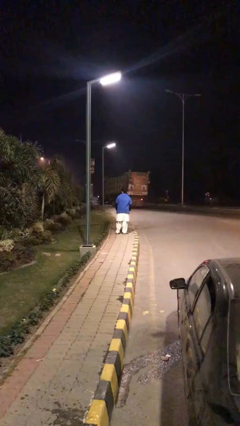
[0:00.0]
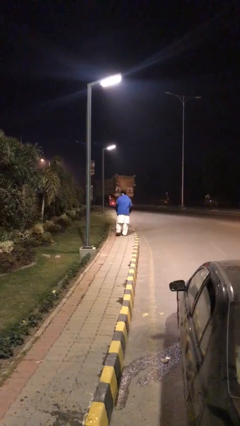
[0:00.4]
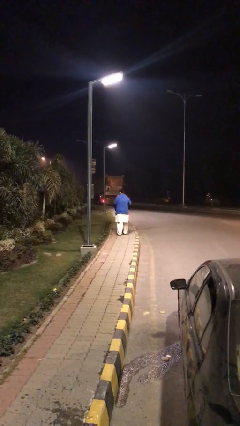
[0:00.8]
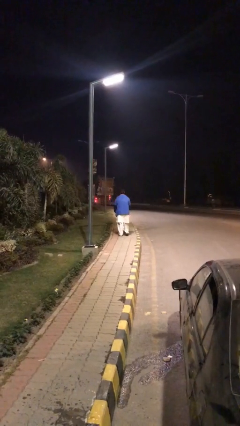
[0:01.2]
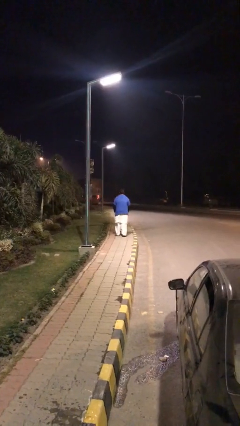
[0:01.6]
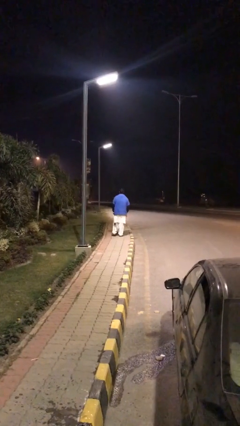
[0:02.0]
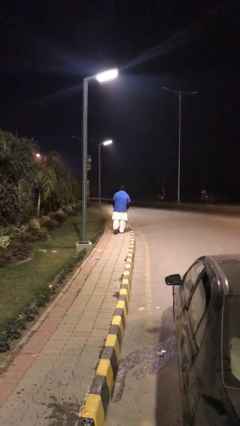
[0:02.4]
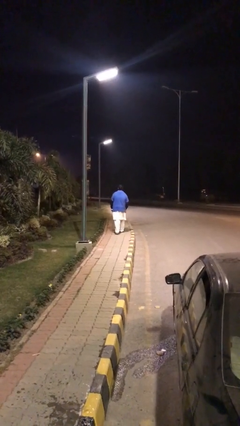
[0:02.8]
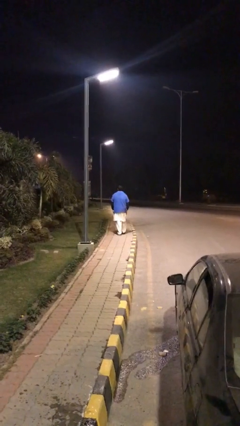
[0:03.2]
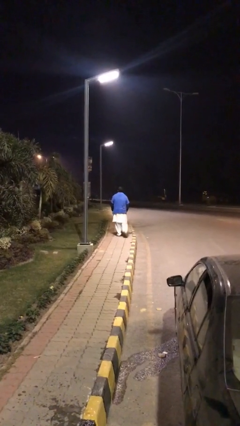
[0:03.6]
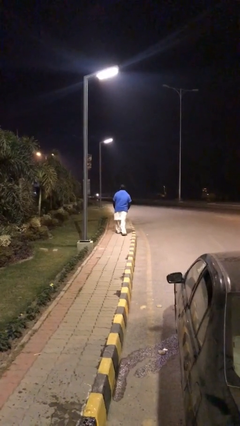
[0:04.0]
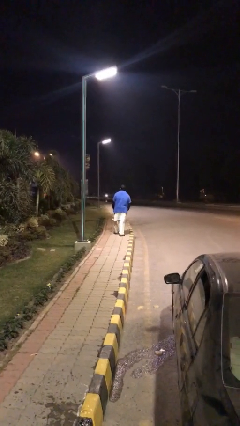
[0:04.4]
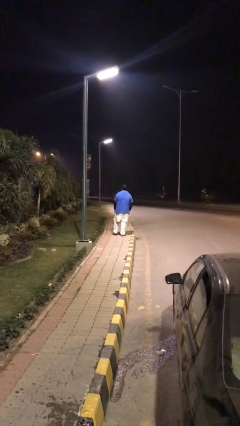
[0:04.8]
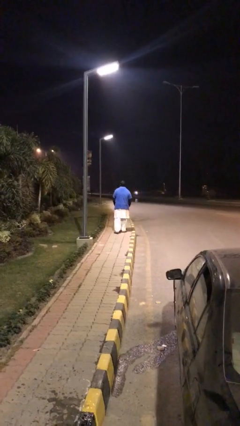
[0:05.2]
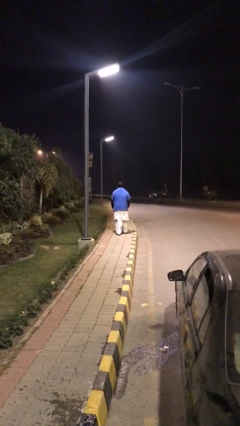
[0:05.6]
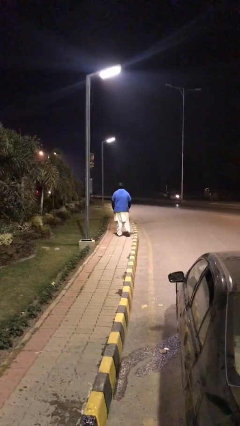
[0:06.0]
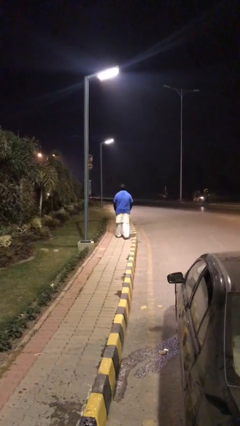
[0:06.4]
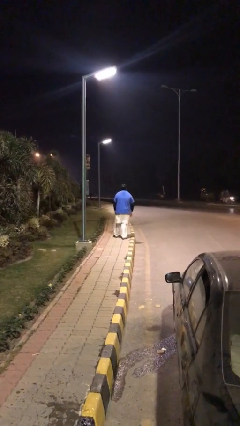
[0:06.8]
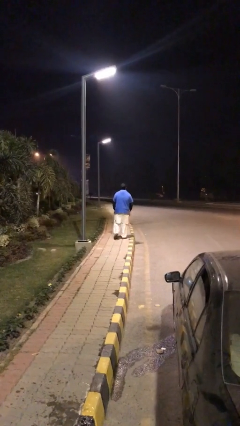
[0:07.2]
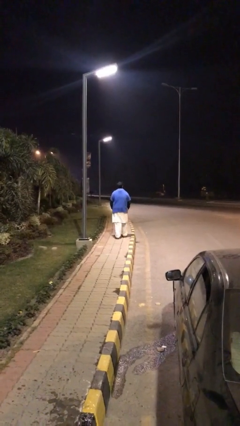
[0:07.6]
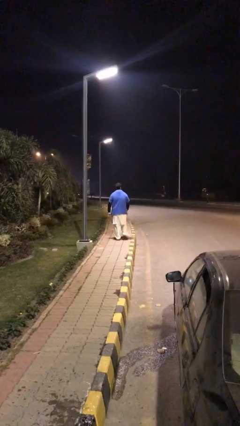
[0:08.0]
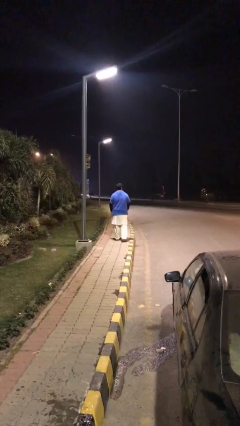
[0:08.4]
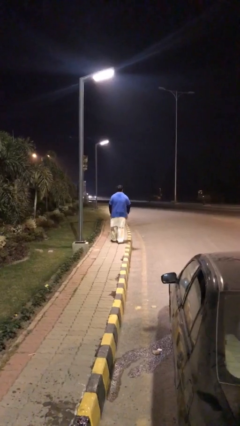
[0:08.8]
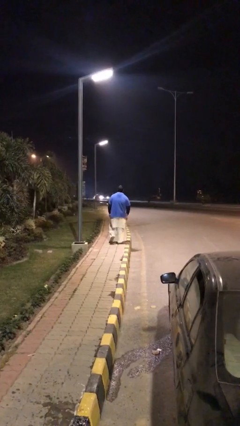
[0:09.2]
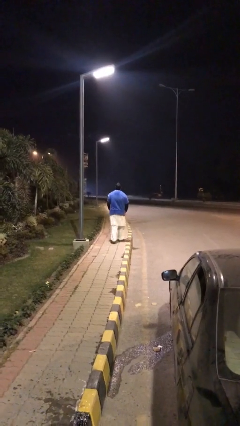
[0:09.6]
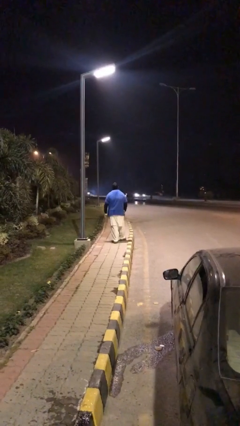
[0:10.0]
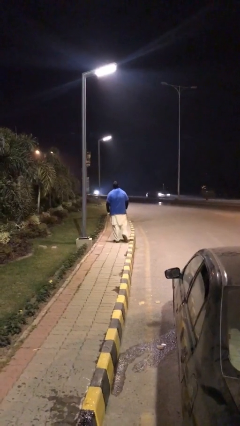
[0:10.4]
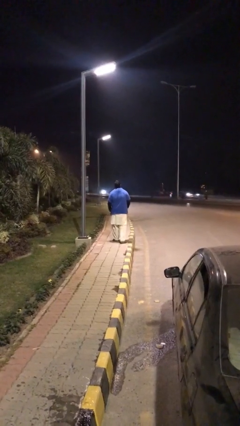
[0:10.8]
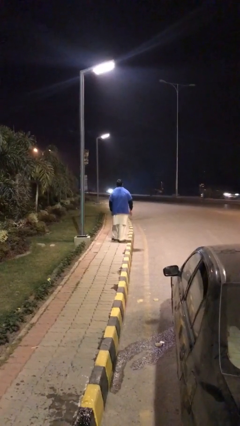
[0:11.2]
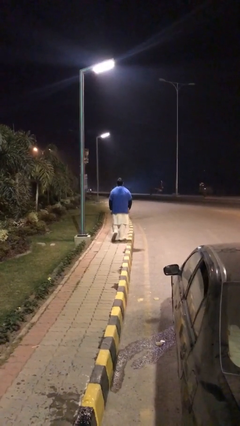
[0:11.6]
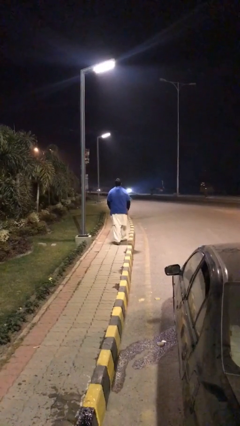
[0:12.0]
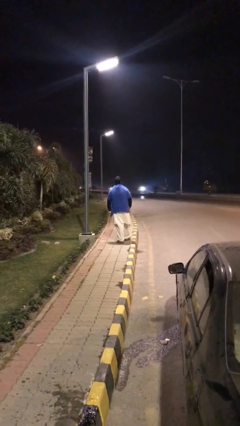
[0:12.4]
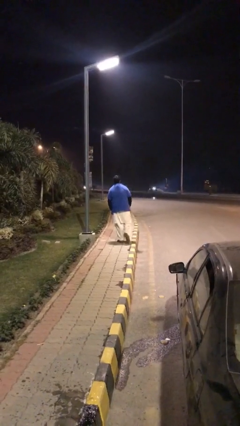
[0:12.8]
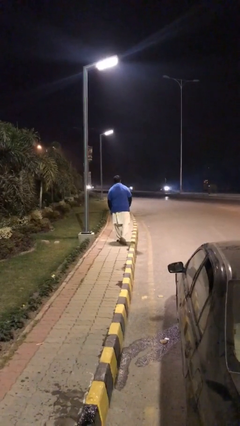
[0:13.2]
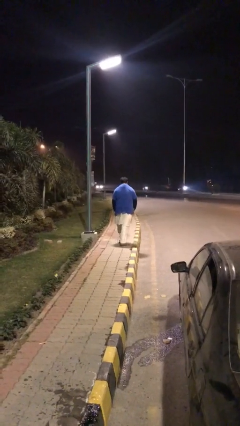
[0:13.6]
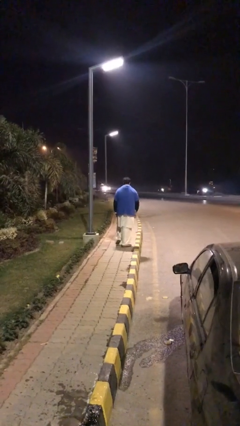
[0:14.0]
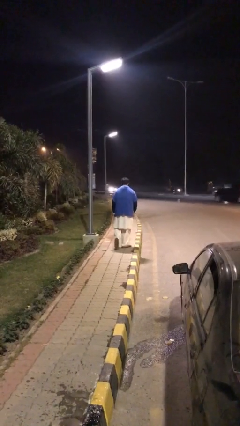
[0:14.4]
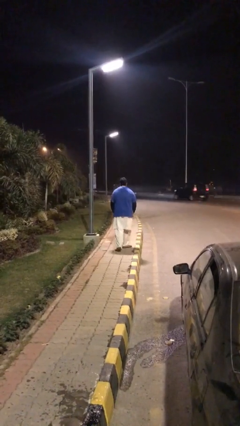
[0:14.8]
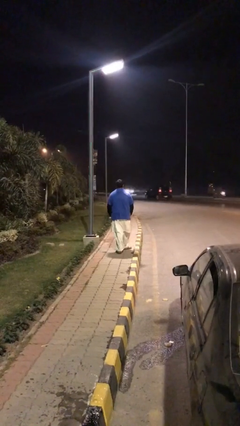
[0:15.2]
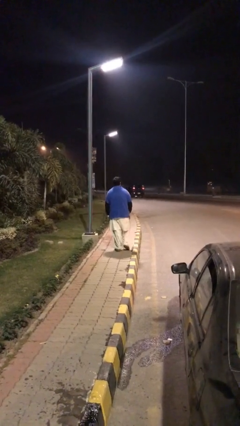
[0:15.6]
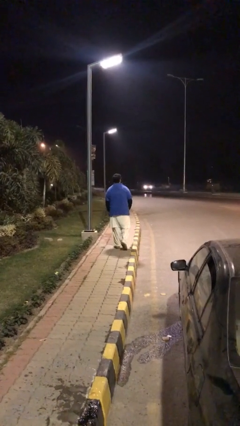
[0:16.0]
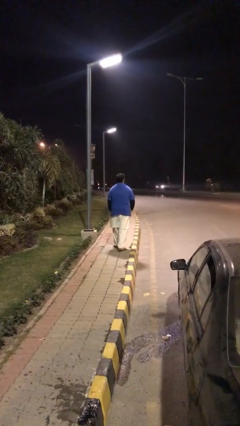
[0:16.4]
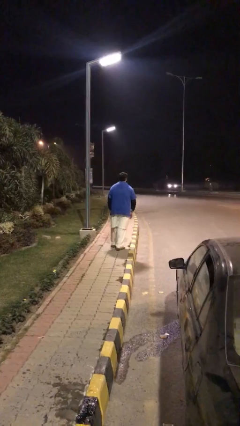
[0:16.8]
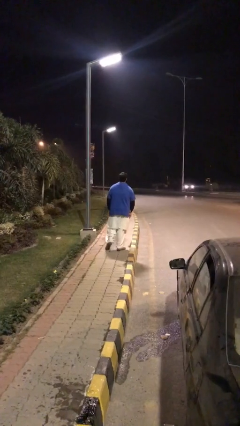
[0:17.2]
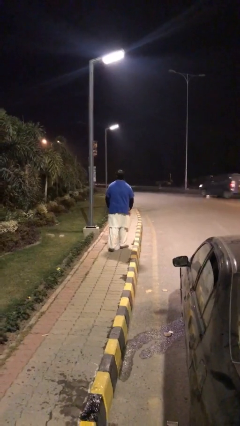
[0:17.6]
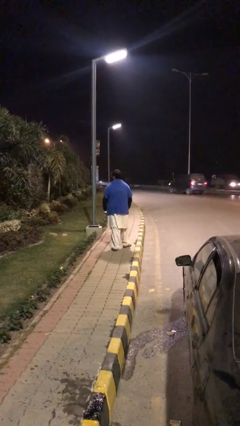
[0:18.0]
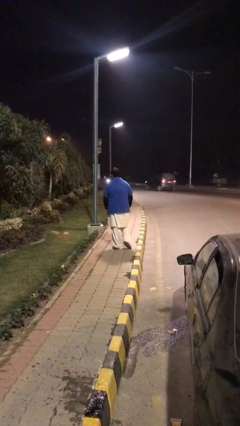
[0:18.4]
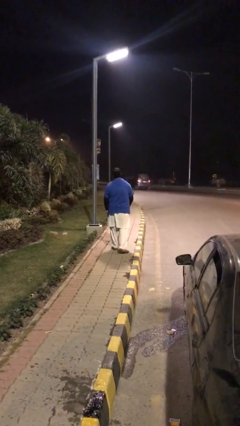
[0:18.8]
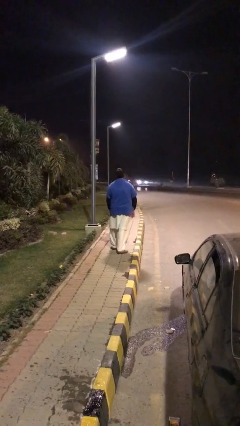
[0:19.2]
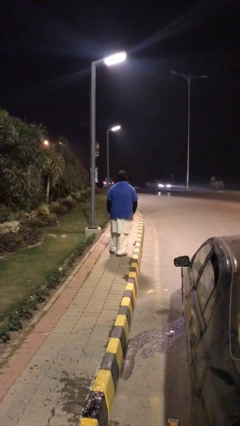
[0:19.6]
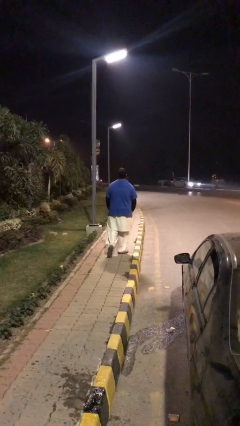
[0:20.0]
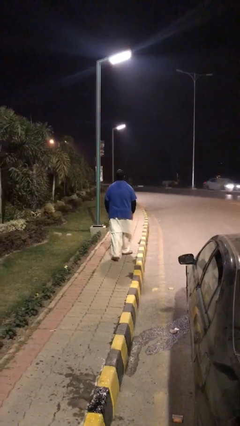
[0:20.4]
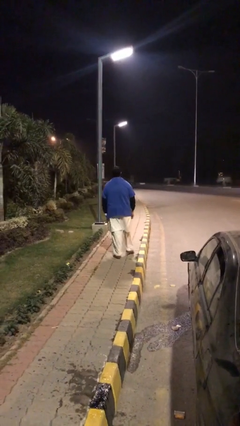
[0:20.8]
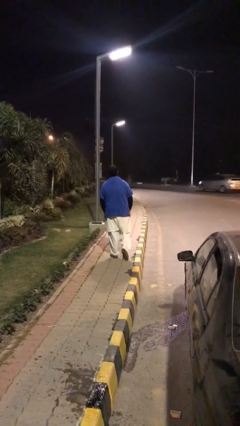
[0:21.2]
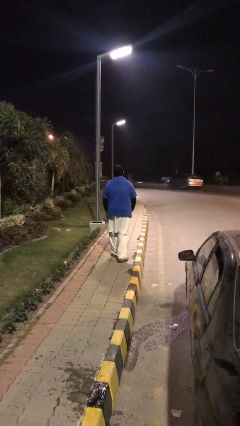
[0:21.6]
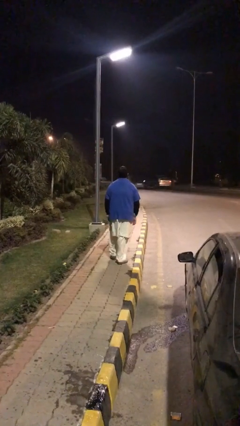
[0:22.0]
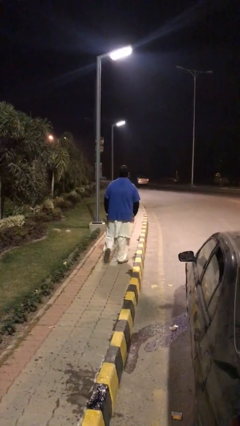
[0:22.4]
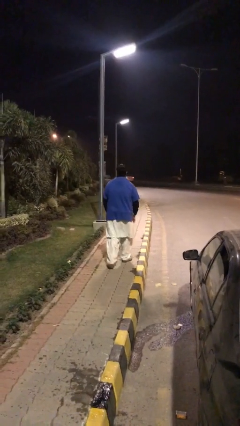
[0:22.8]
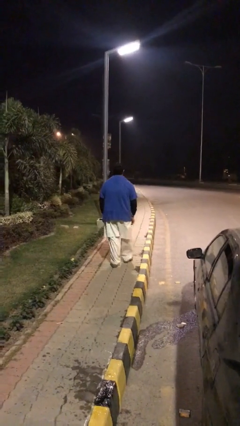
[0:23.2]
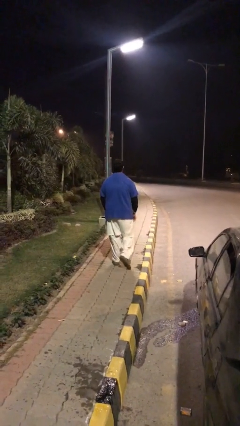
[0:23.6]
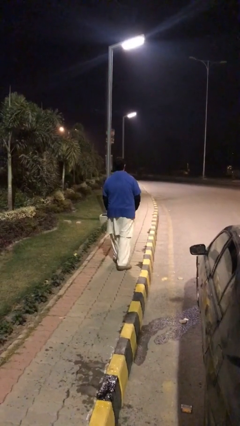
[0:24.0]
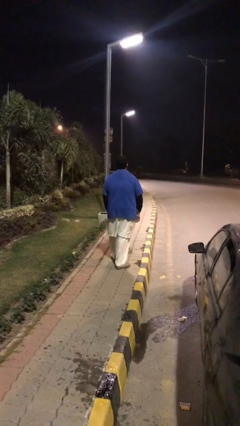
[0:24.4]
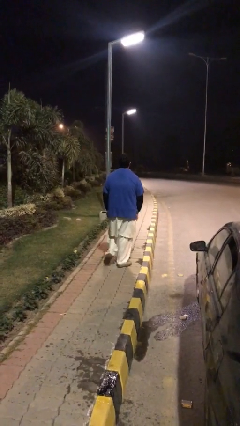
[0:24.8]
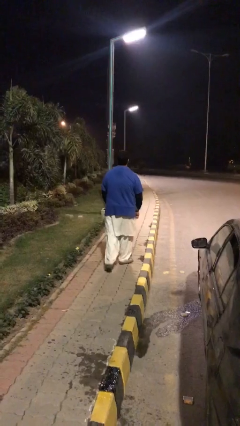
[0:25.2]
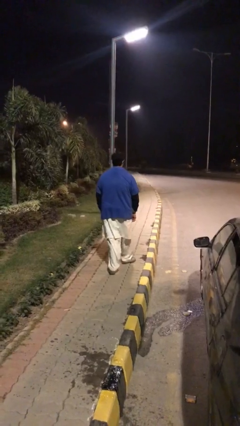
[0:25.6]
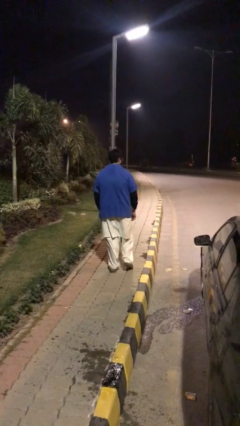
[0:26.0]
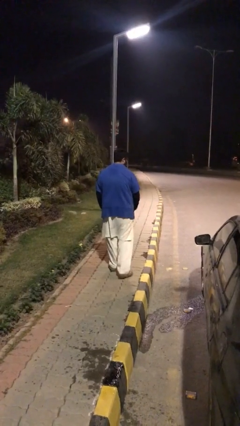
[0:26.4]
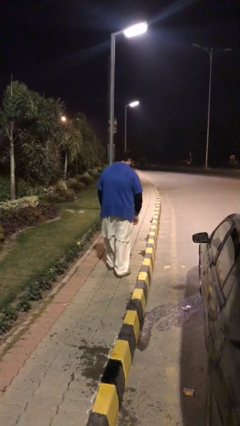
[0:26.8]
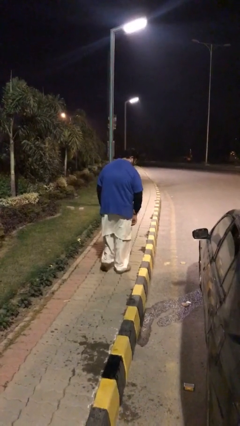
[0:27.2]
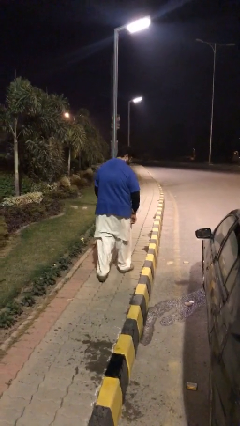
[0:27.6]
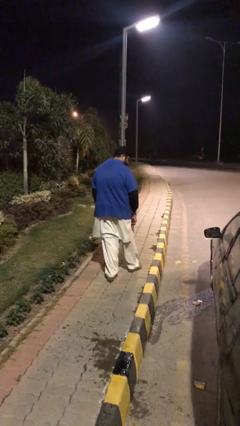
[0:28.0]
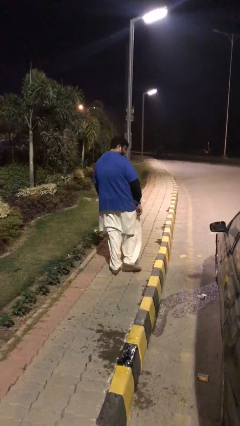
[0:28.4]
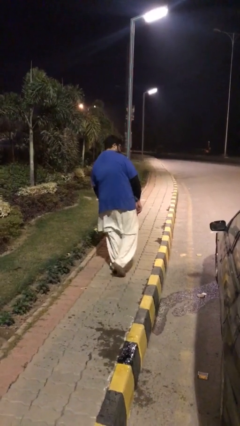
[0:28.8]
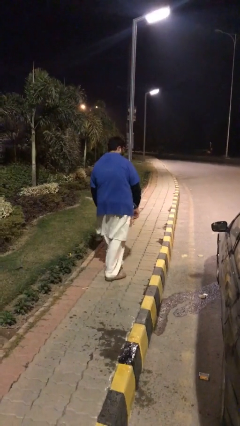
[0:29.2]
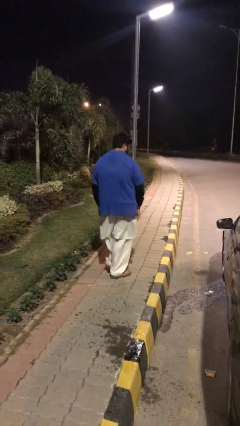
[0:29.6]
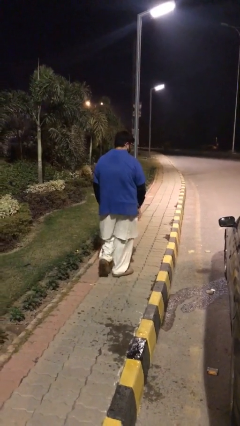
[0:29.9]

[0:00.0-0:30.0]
person walks

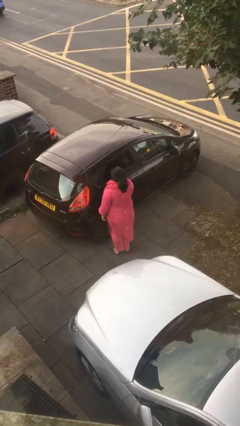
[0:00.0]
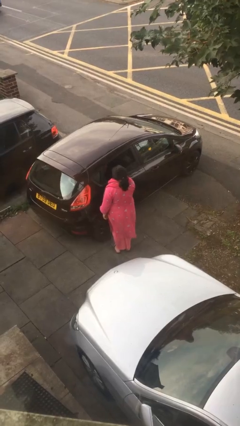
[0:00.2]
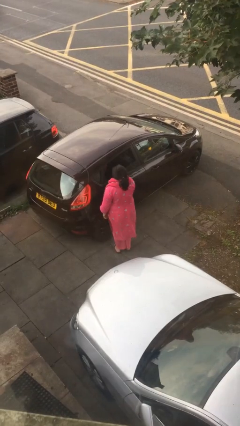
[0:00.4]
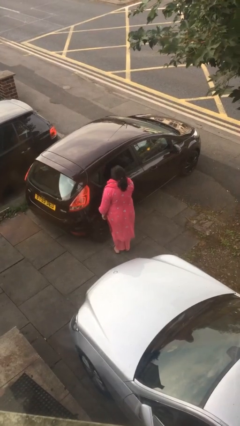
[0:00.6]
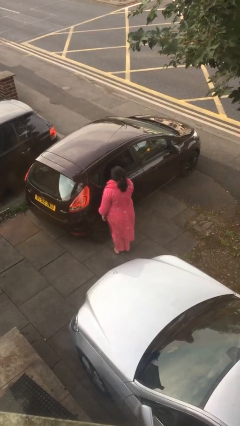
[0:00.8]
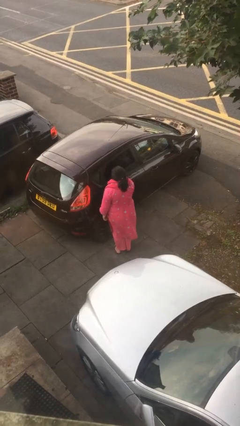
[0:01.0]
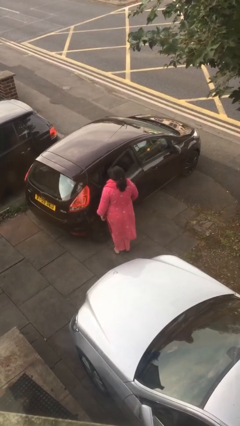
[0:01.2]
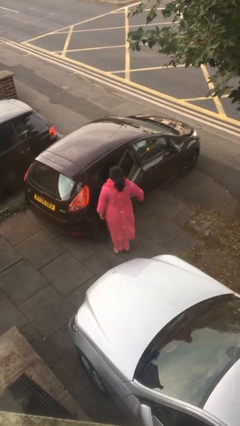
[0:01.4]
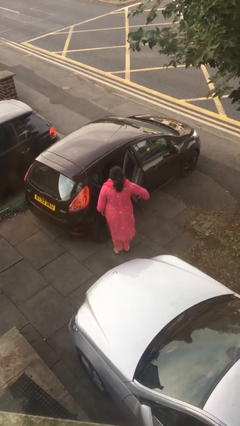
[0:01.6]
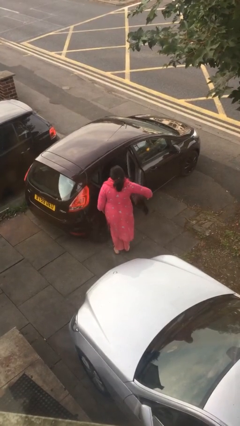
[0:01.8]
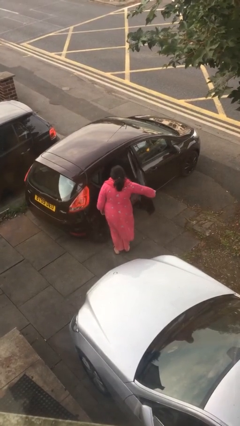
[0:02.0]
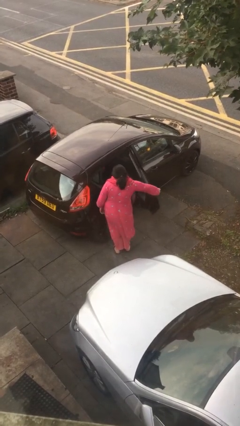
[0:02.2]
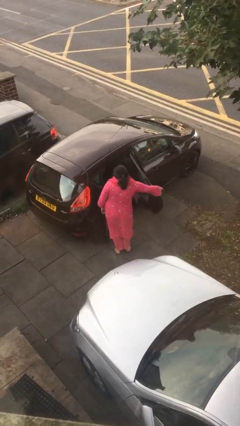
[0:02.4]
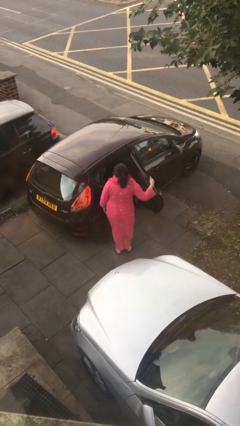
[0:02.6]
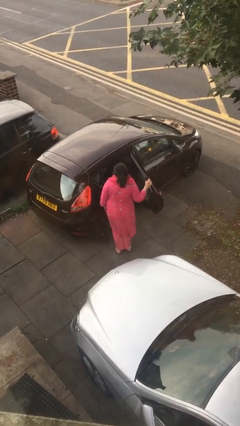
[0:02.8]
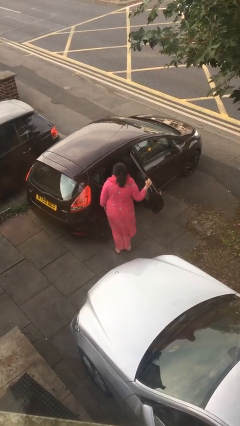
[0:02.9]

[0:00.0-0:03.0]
person opens car door
